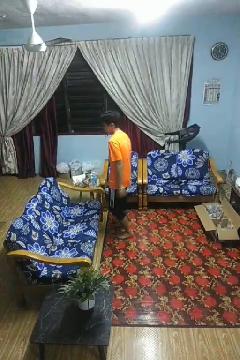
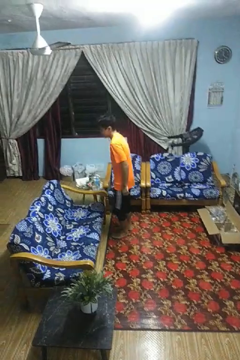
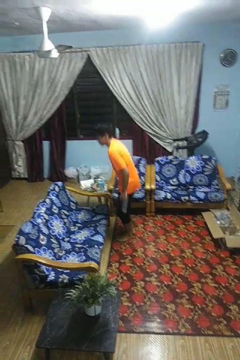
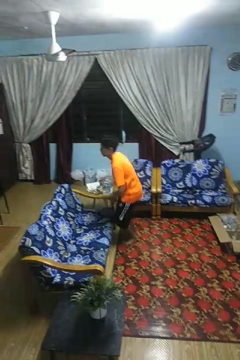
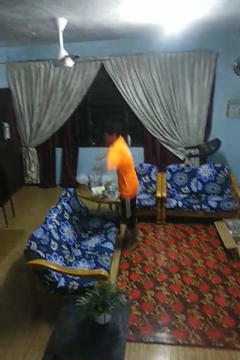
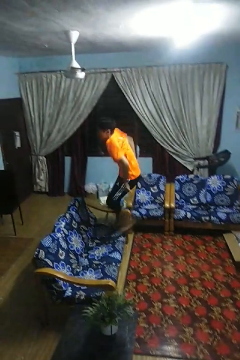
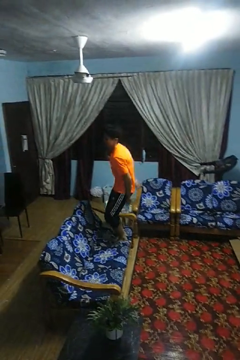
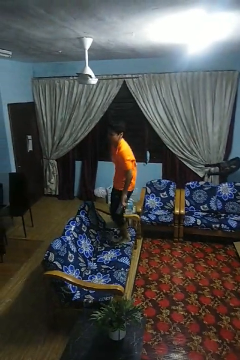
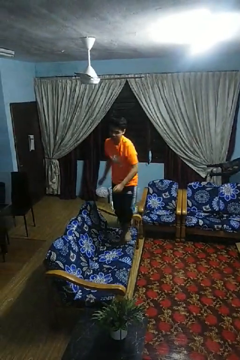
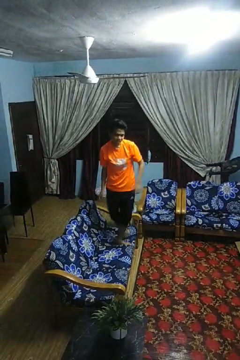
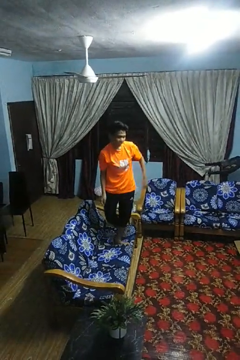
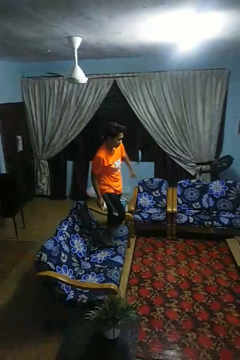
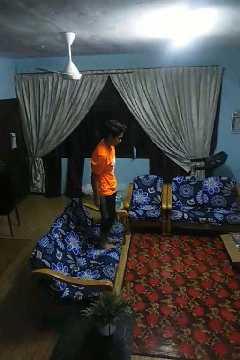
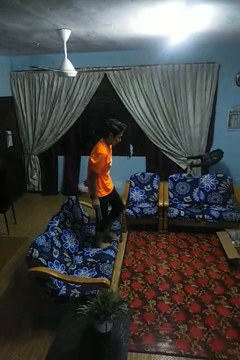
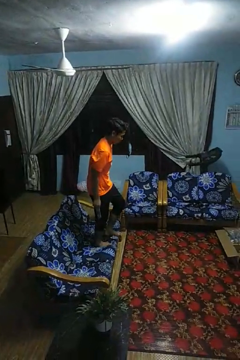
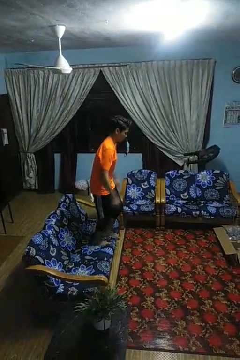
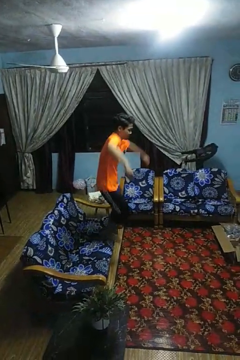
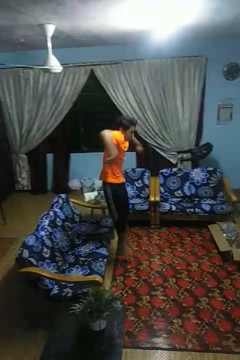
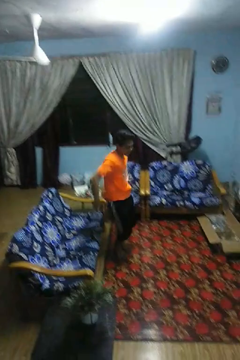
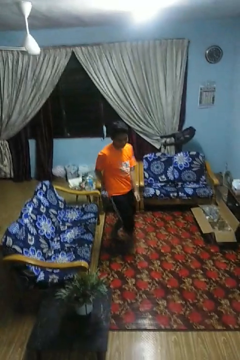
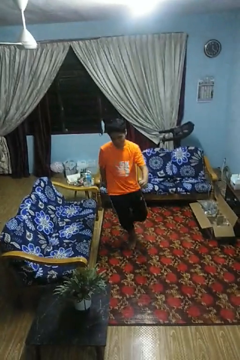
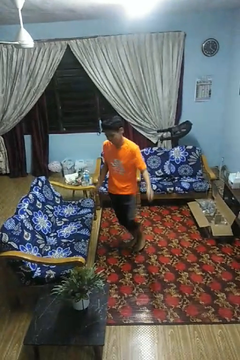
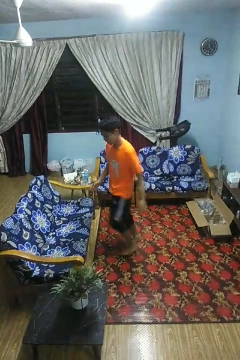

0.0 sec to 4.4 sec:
person jumps on couch

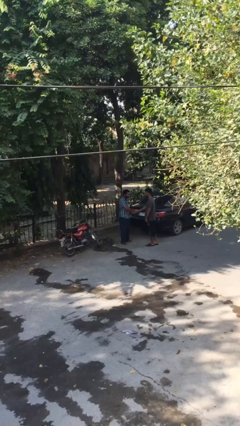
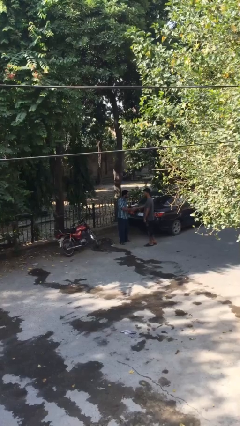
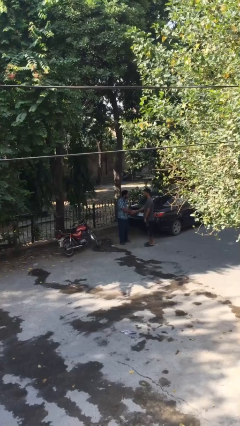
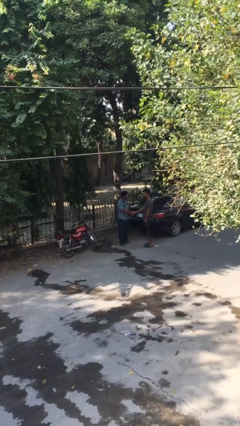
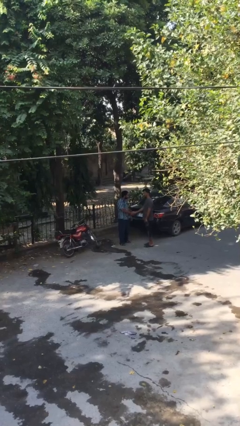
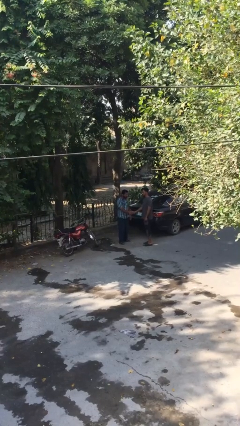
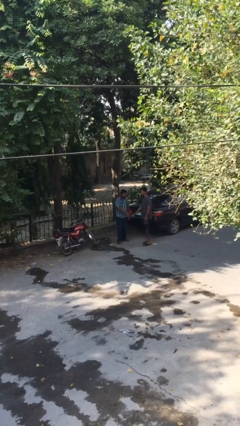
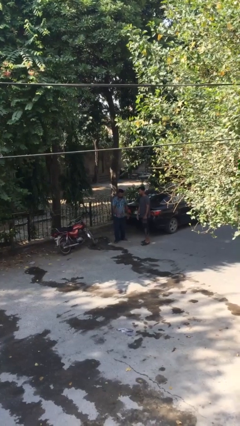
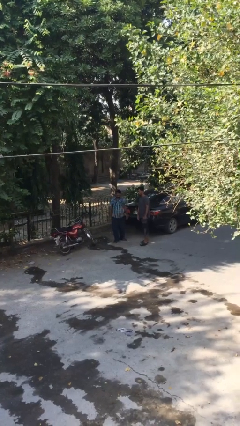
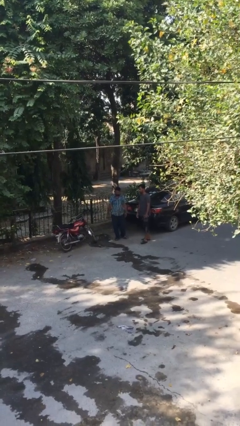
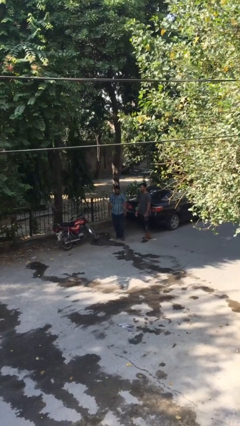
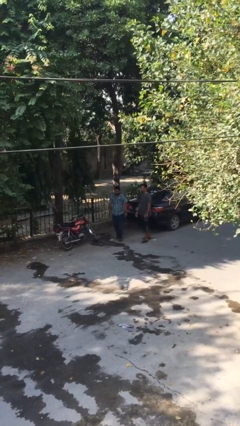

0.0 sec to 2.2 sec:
person shakes hand

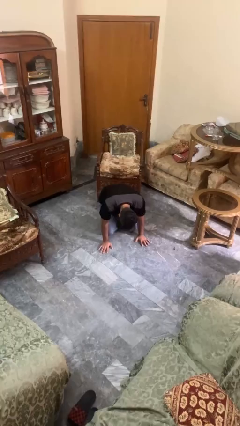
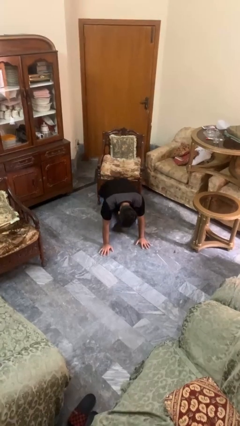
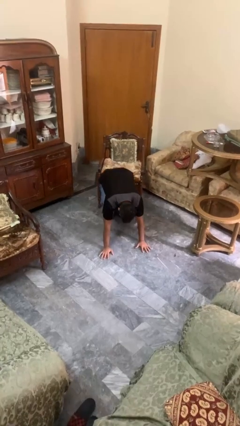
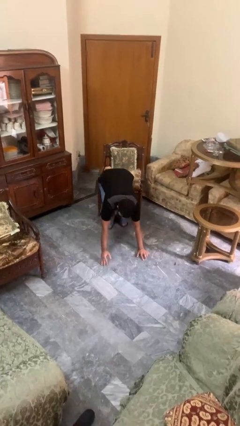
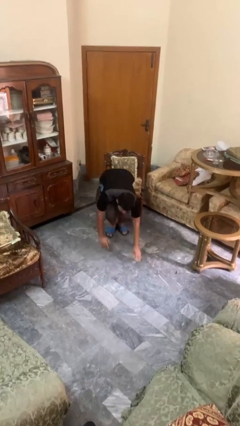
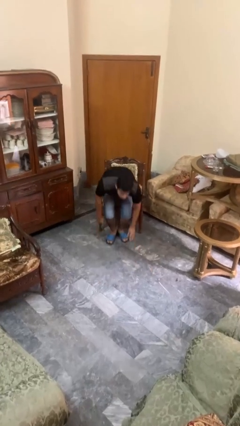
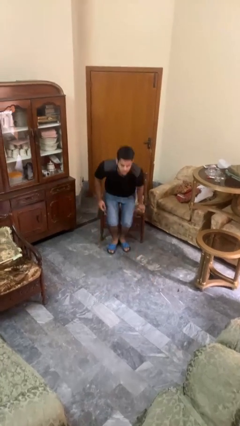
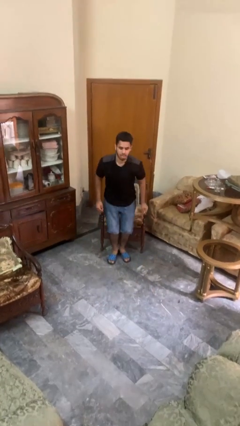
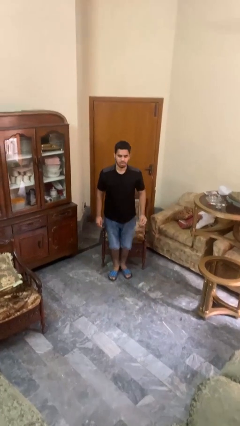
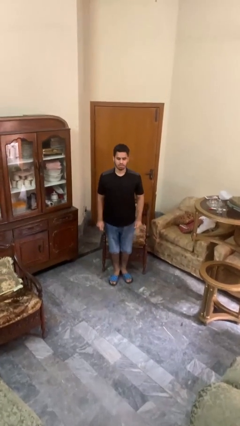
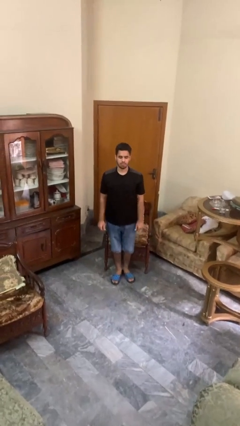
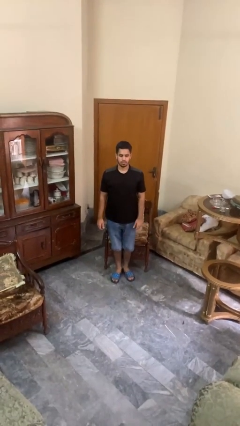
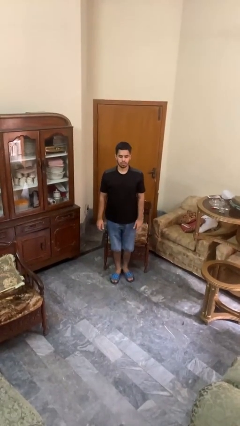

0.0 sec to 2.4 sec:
person stands up from floor

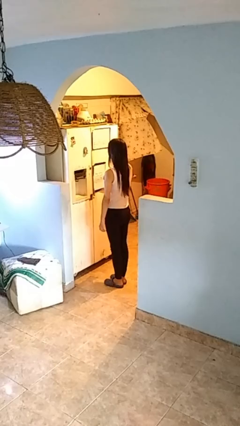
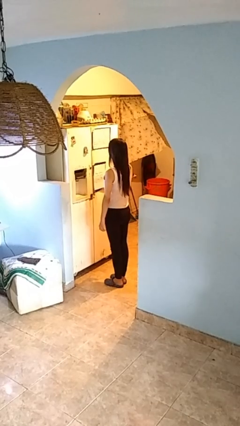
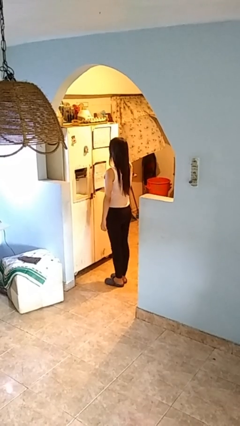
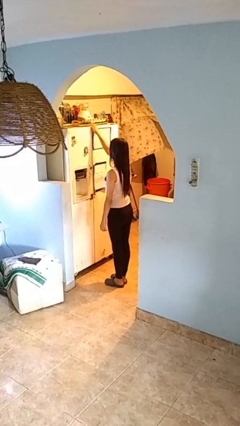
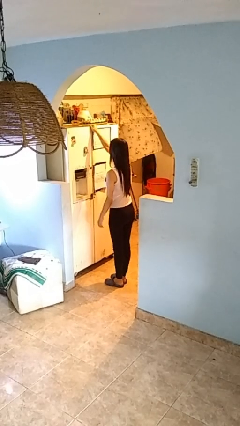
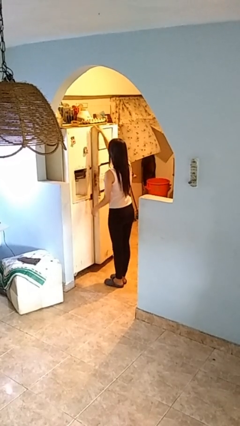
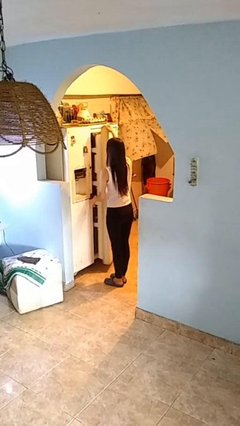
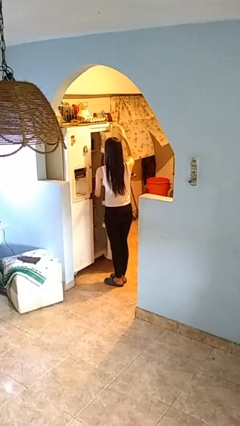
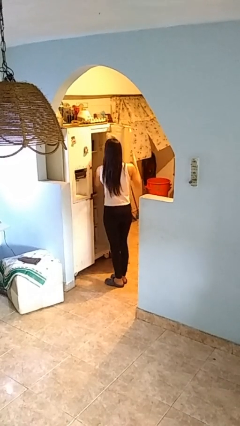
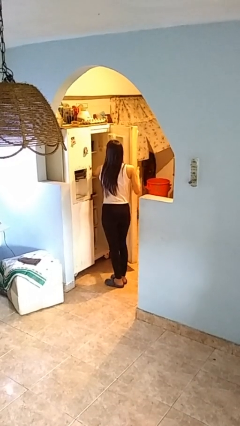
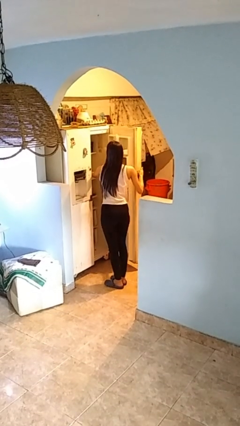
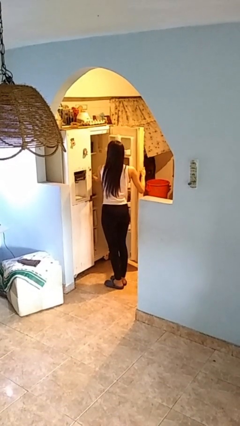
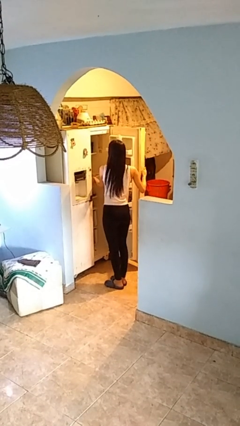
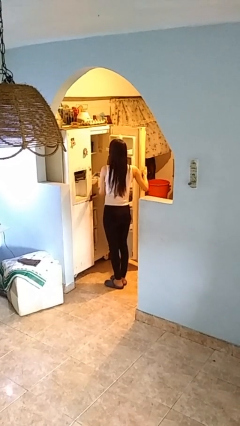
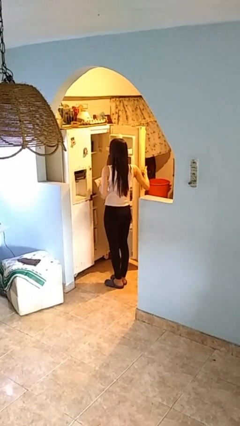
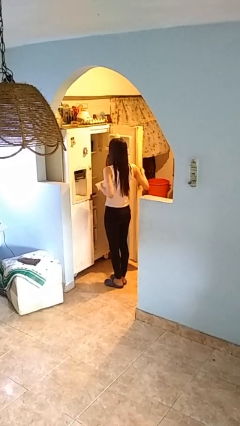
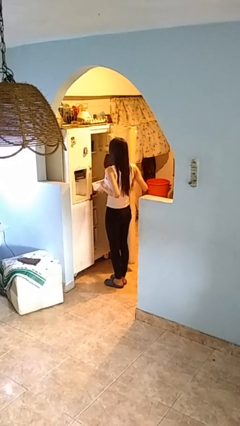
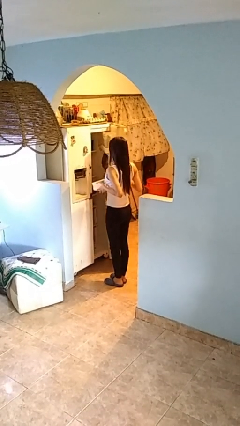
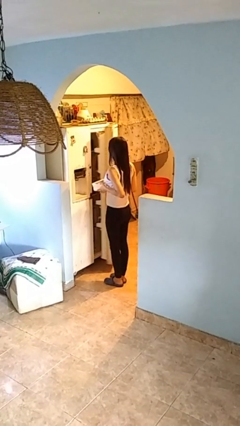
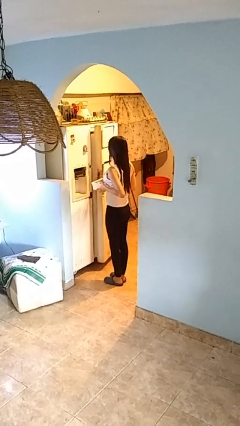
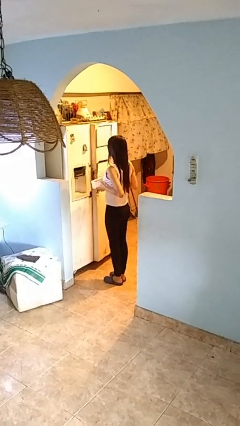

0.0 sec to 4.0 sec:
person takes object from refrigerator

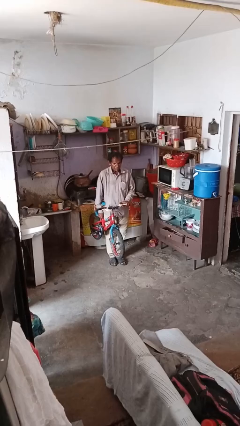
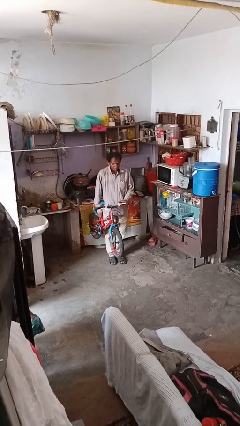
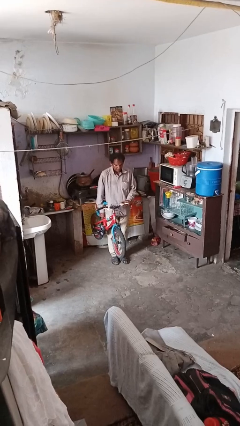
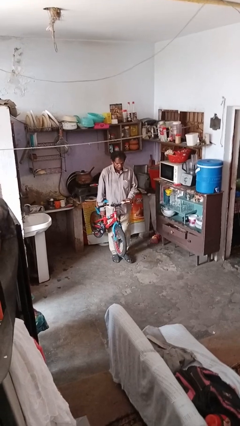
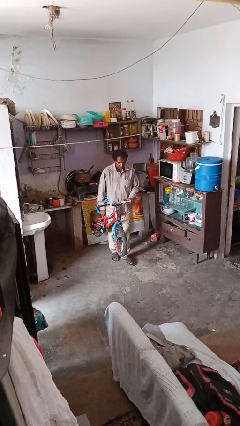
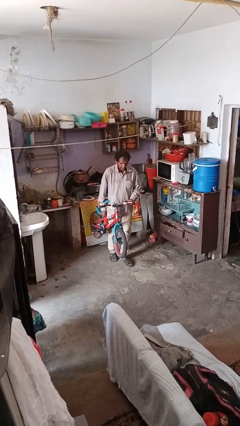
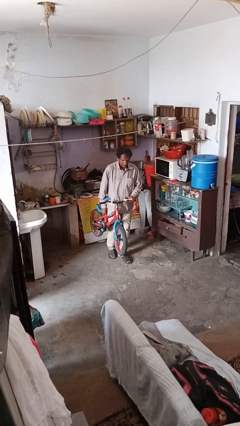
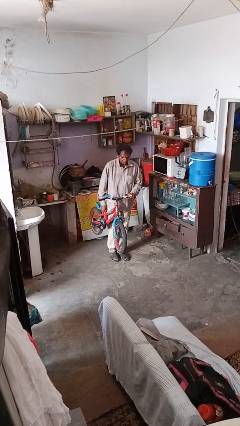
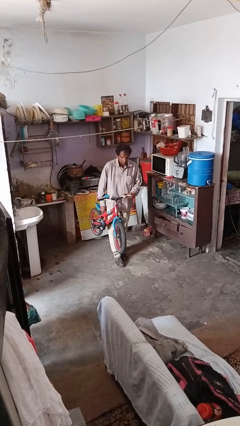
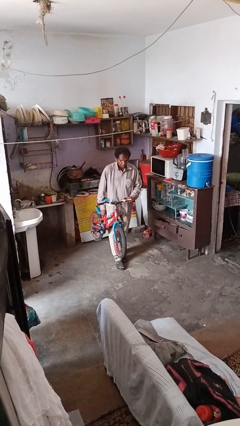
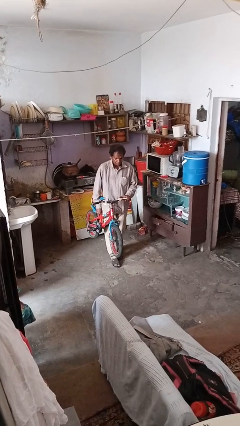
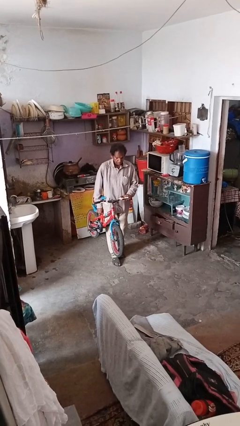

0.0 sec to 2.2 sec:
person carries bicycle

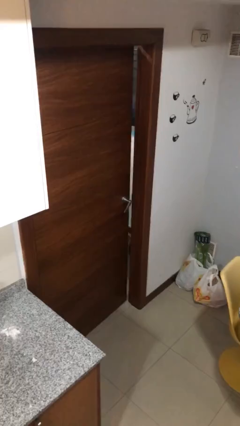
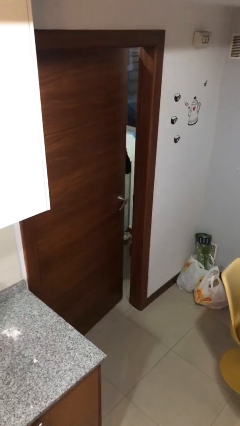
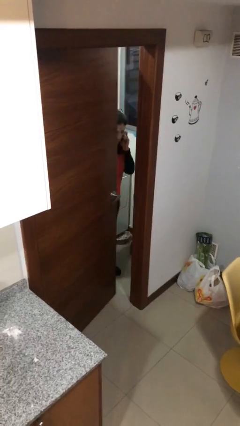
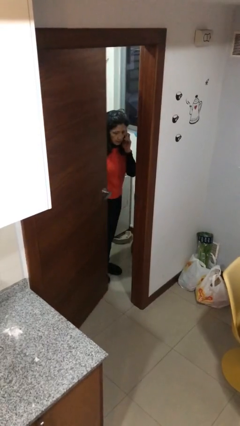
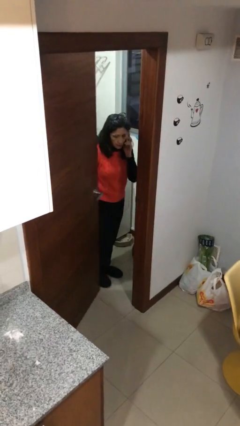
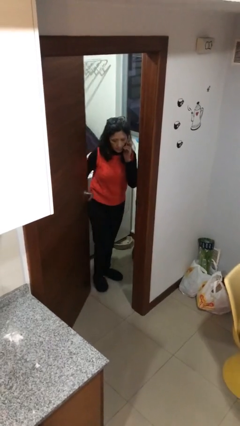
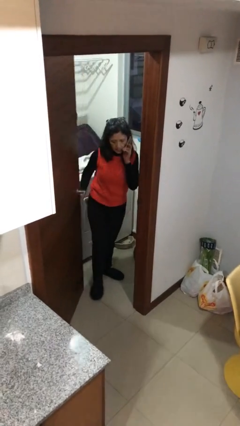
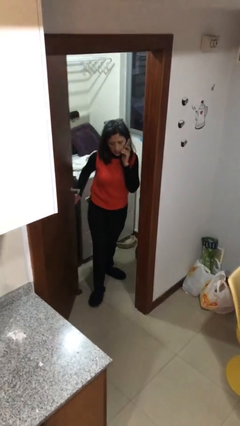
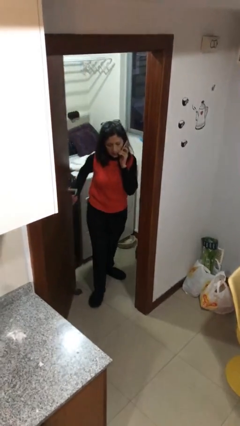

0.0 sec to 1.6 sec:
person opens facility door

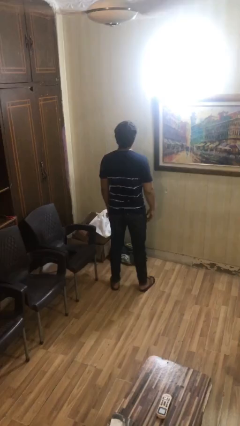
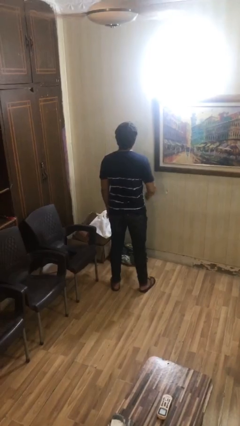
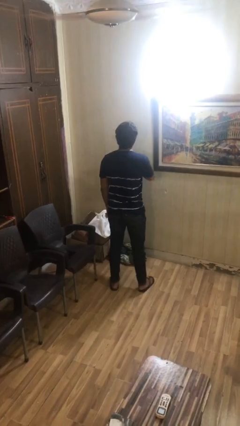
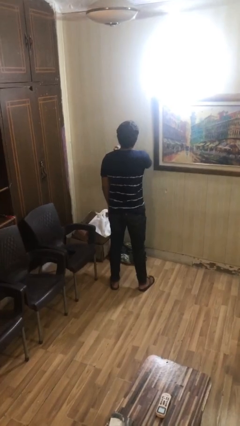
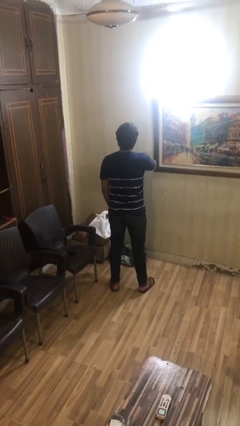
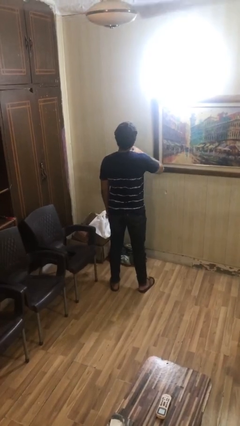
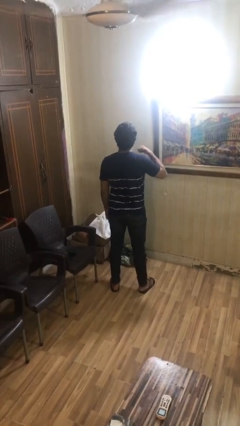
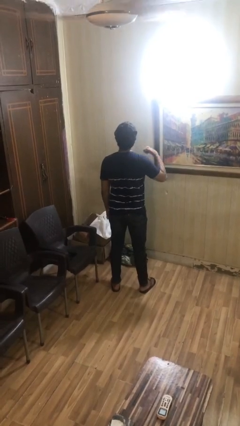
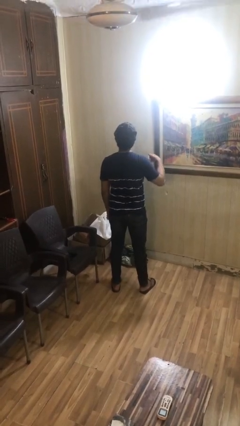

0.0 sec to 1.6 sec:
person gestures cut
